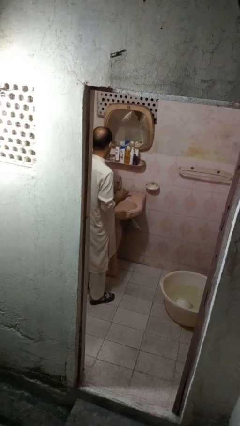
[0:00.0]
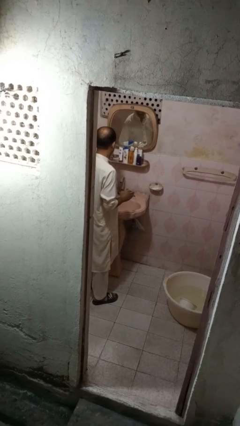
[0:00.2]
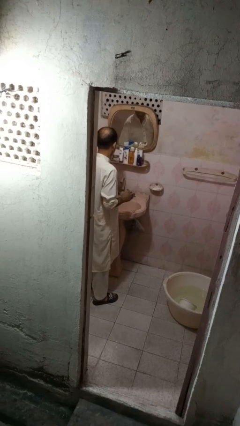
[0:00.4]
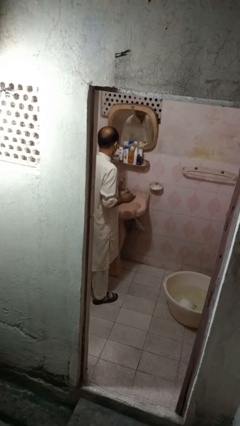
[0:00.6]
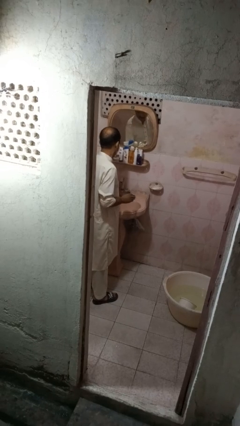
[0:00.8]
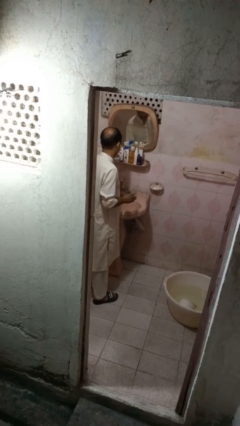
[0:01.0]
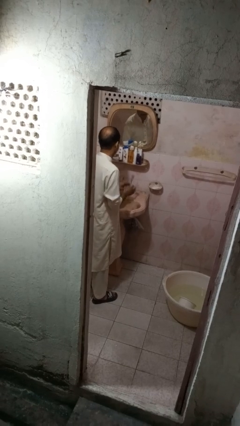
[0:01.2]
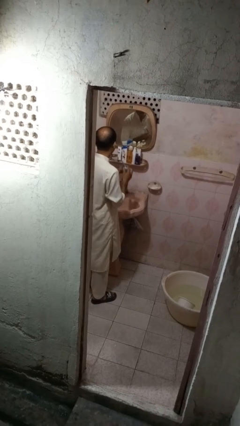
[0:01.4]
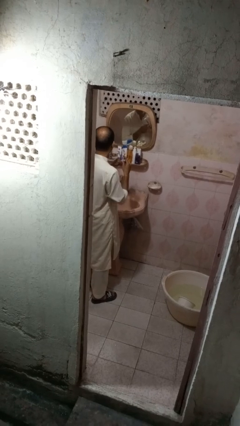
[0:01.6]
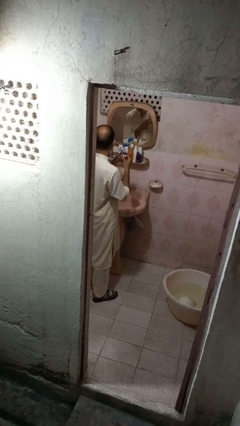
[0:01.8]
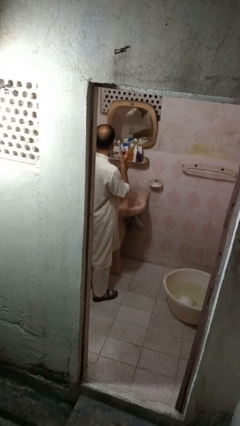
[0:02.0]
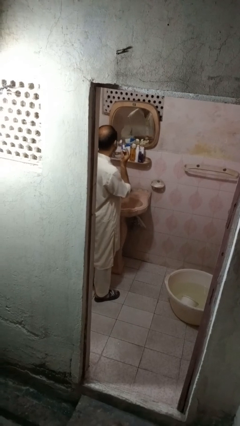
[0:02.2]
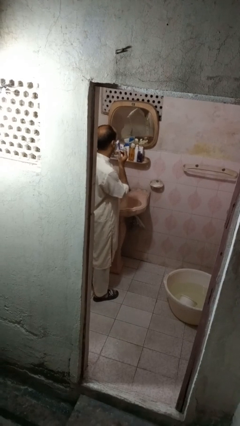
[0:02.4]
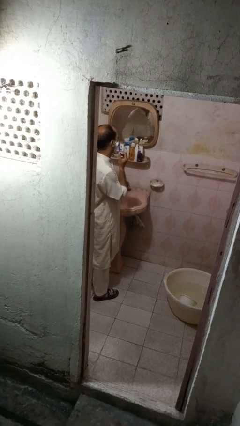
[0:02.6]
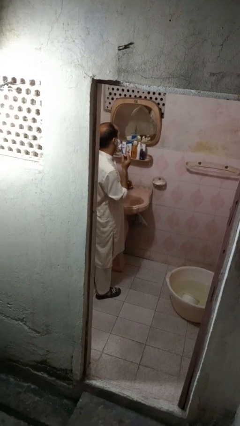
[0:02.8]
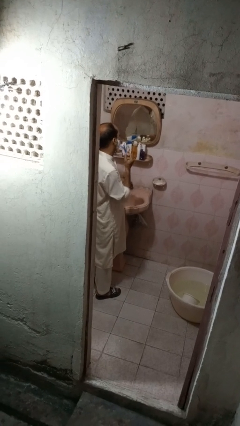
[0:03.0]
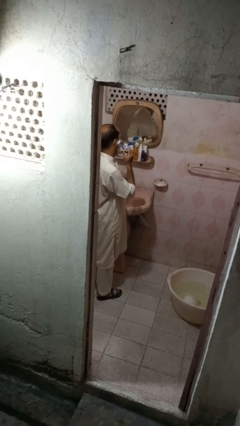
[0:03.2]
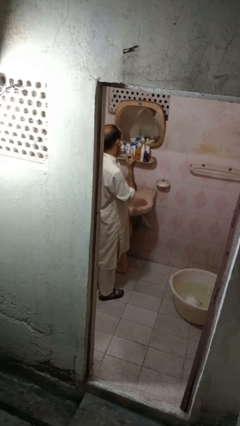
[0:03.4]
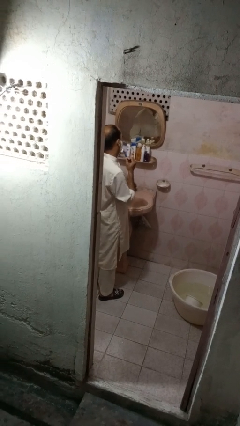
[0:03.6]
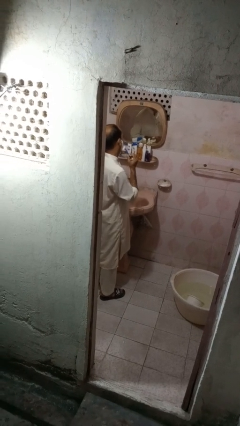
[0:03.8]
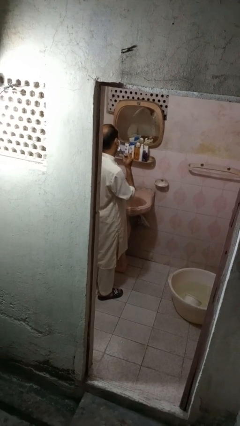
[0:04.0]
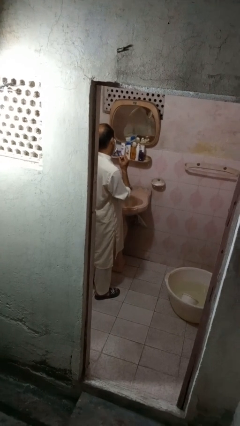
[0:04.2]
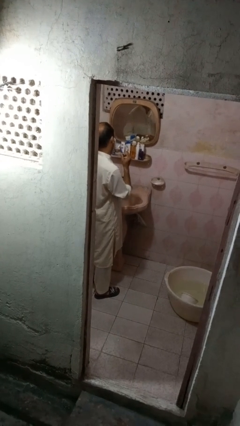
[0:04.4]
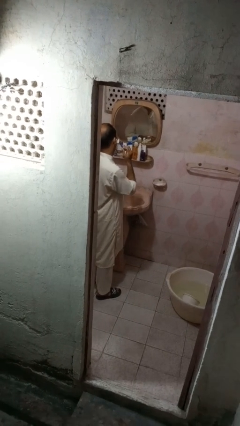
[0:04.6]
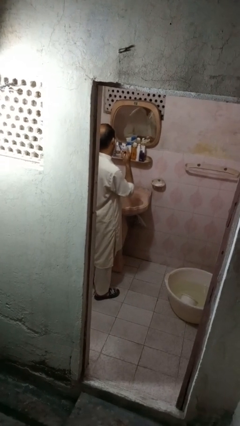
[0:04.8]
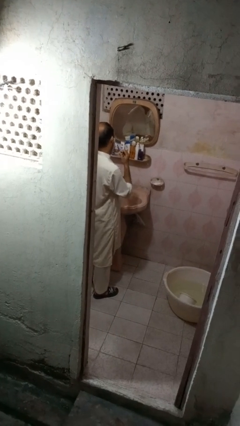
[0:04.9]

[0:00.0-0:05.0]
person shaves face

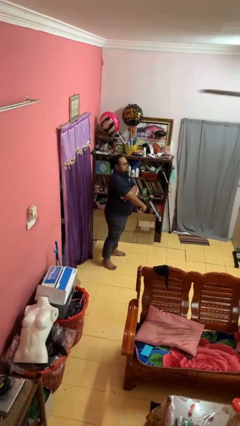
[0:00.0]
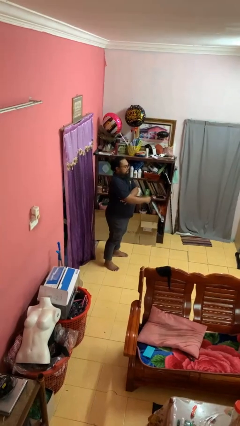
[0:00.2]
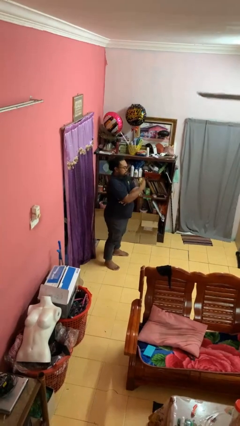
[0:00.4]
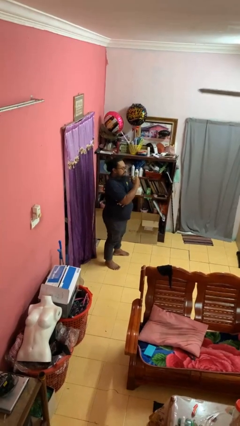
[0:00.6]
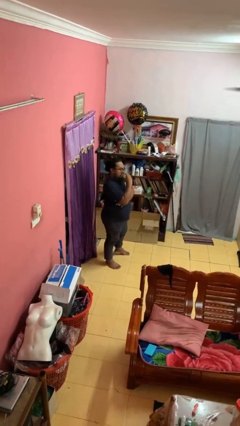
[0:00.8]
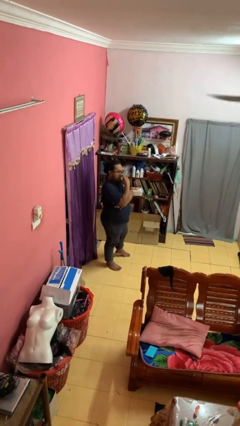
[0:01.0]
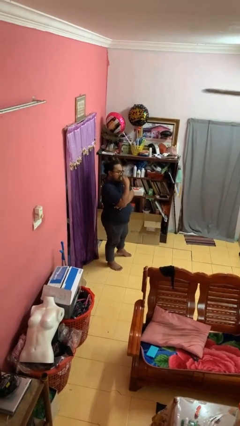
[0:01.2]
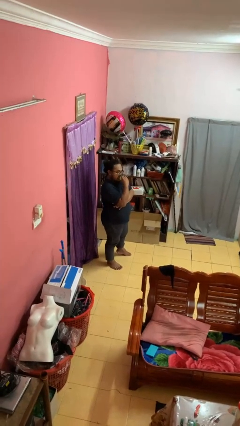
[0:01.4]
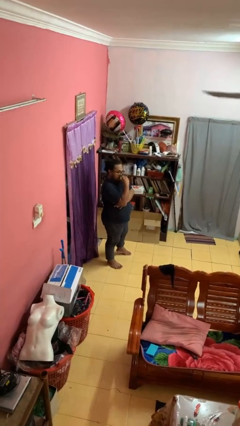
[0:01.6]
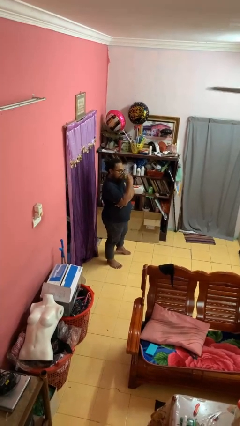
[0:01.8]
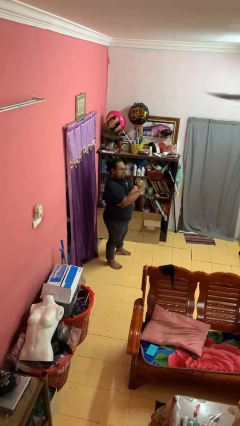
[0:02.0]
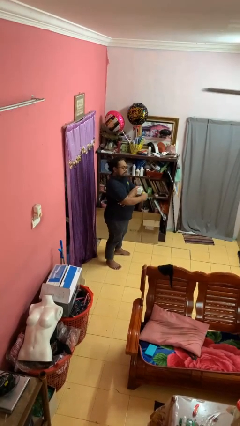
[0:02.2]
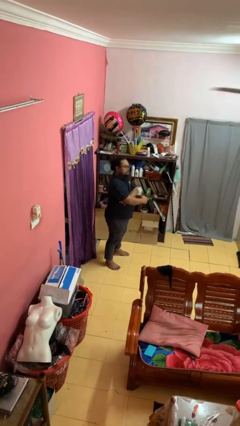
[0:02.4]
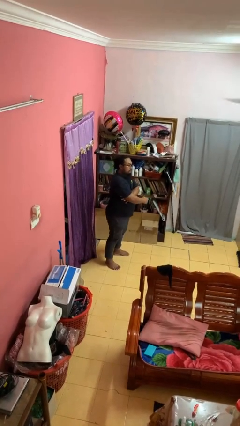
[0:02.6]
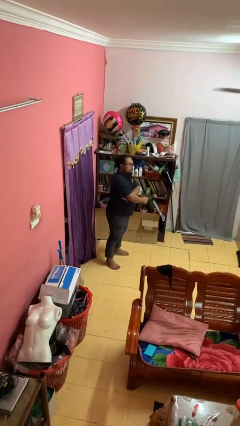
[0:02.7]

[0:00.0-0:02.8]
person eats apple

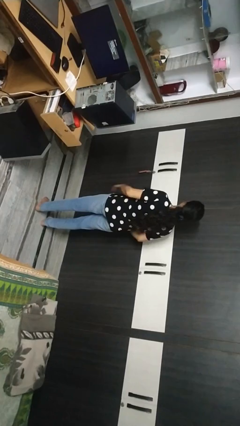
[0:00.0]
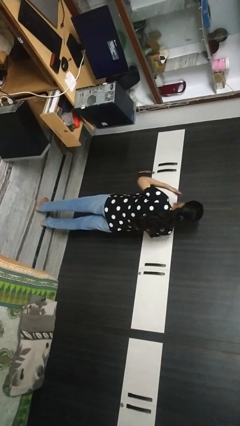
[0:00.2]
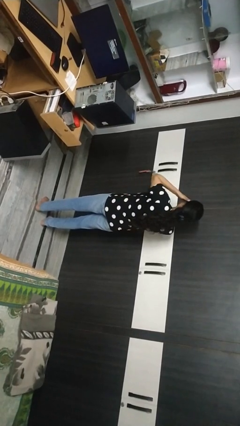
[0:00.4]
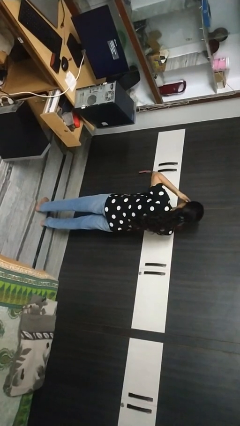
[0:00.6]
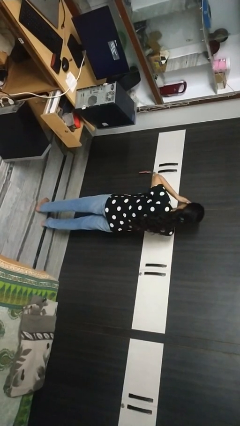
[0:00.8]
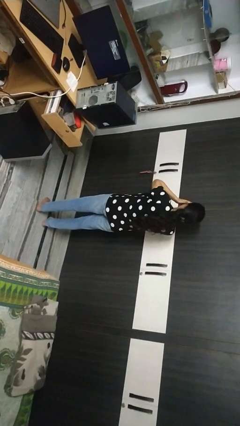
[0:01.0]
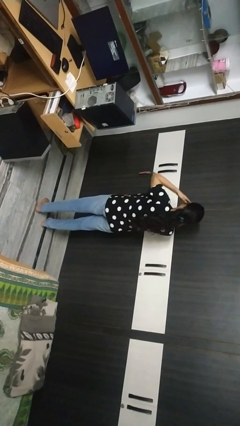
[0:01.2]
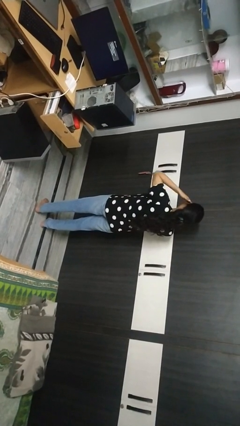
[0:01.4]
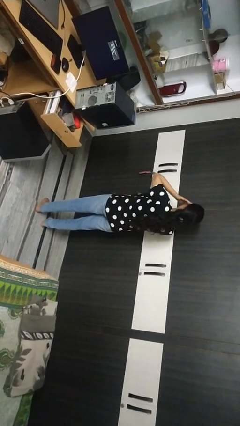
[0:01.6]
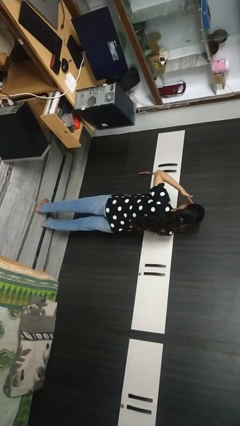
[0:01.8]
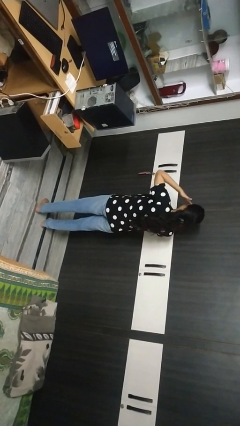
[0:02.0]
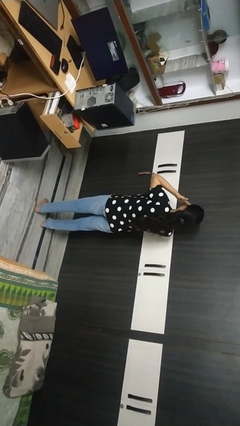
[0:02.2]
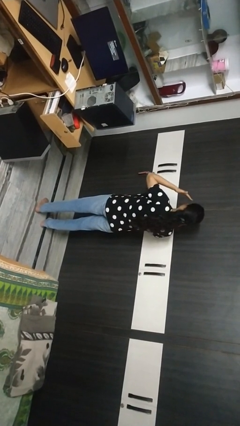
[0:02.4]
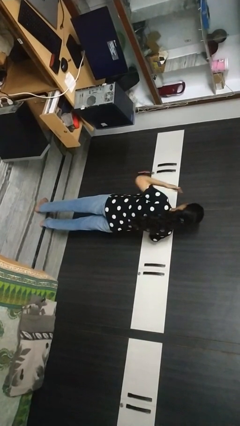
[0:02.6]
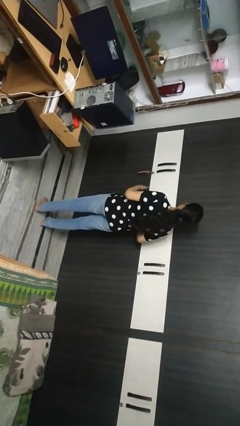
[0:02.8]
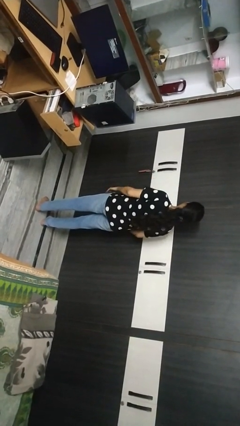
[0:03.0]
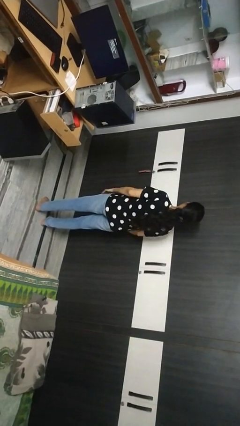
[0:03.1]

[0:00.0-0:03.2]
person rubs eyes

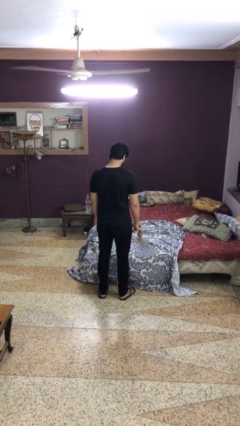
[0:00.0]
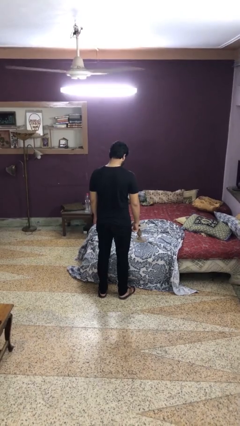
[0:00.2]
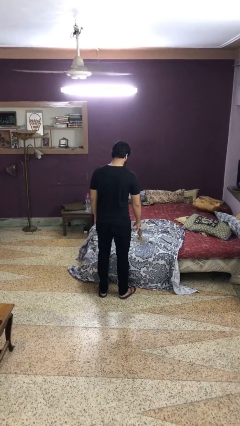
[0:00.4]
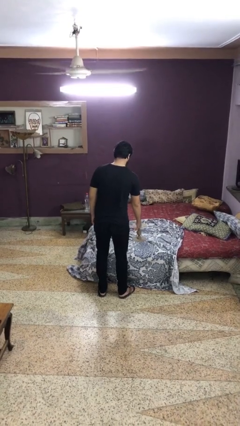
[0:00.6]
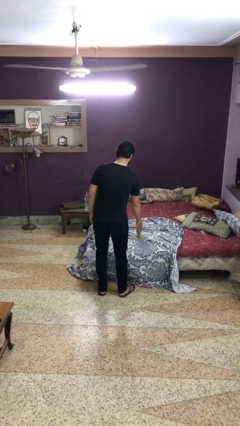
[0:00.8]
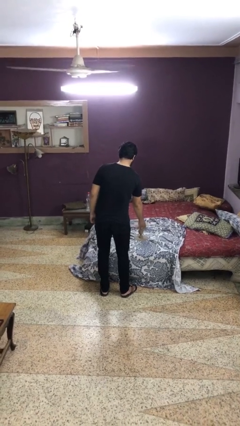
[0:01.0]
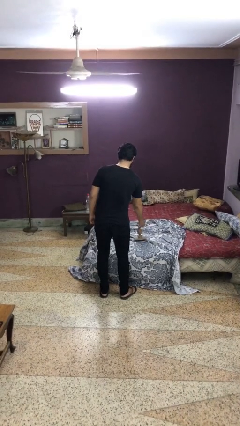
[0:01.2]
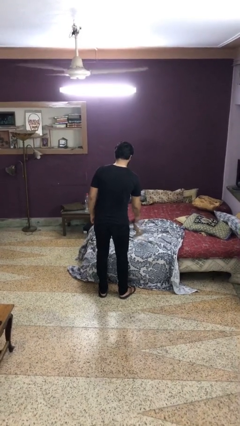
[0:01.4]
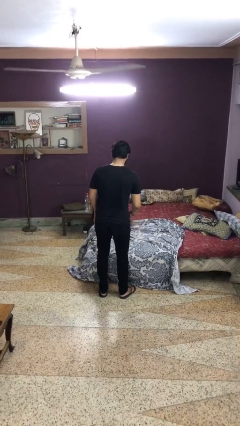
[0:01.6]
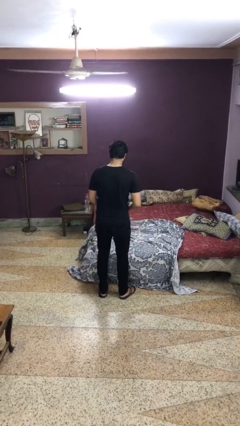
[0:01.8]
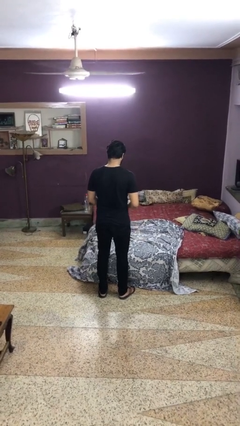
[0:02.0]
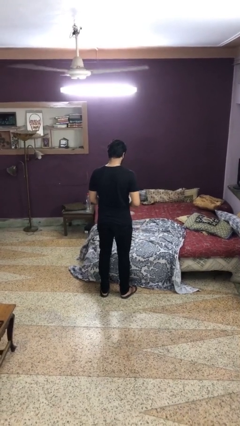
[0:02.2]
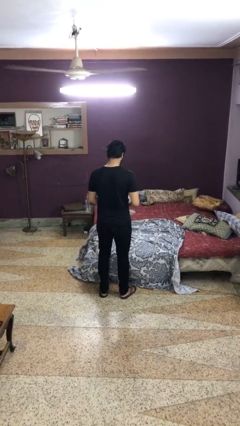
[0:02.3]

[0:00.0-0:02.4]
person picks up object from bed

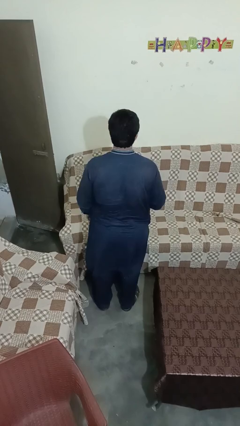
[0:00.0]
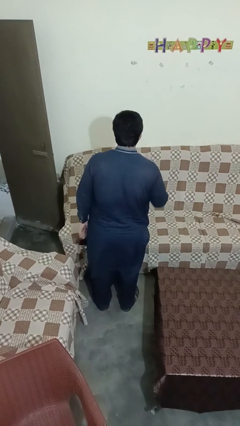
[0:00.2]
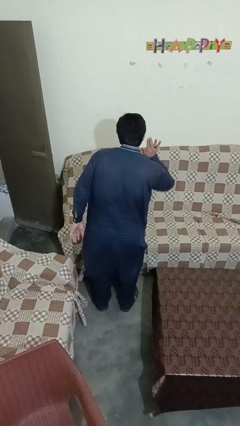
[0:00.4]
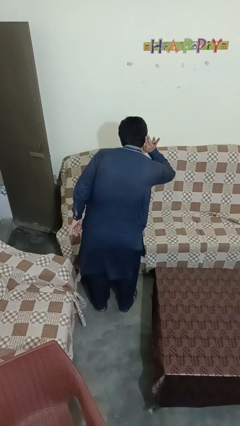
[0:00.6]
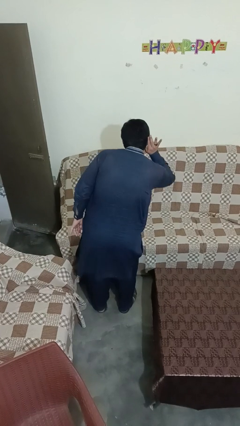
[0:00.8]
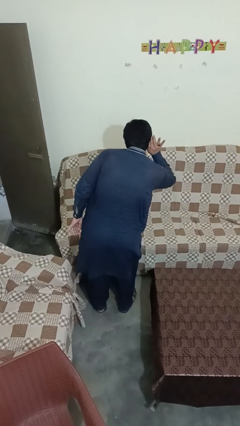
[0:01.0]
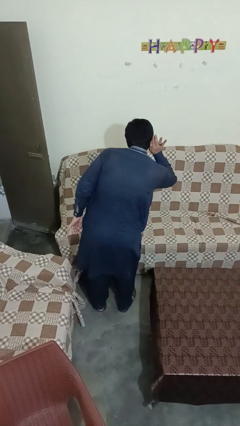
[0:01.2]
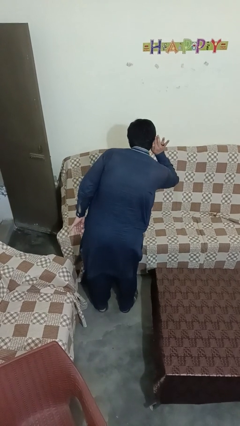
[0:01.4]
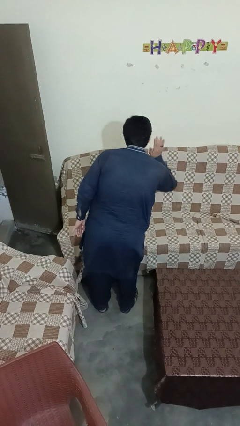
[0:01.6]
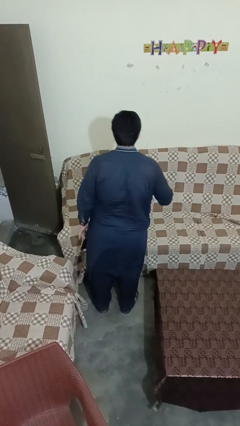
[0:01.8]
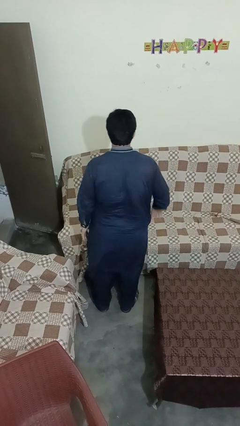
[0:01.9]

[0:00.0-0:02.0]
person gestures listen closely

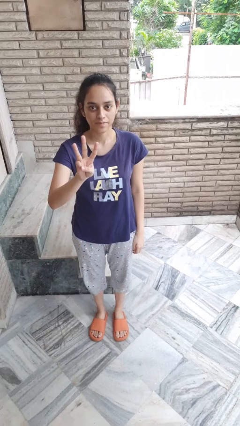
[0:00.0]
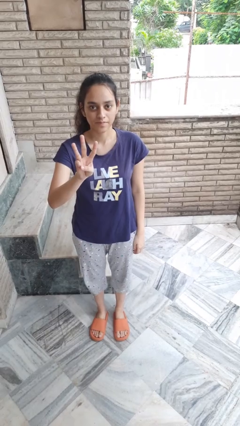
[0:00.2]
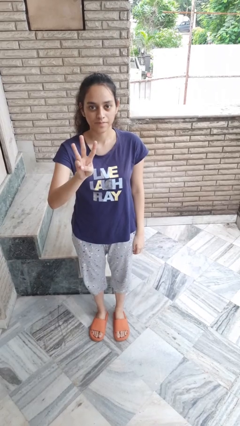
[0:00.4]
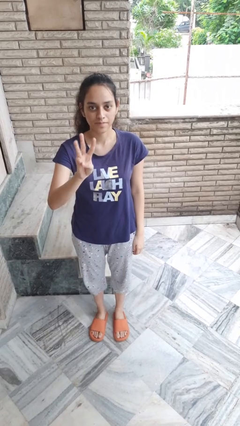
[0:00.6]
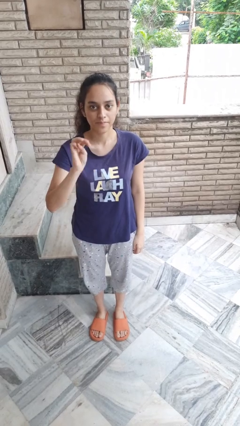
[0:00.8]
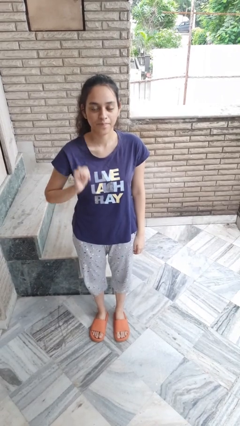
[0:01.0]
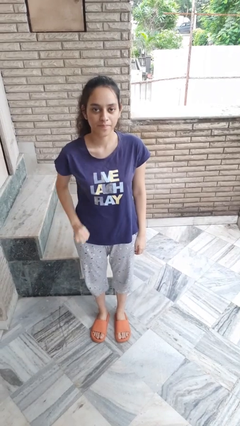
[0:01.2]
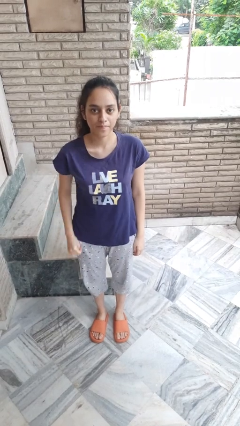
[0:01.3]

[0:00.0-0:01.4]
person gestures number three

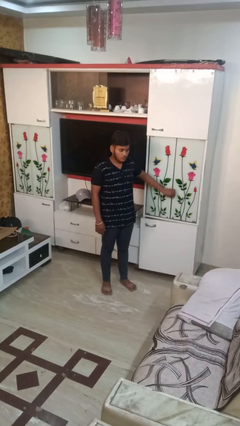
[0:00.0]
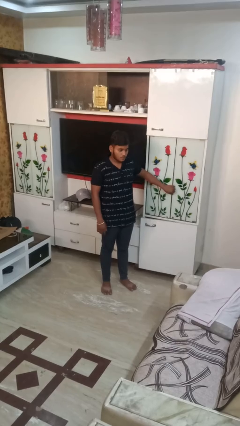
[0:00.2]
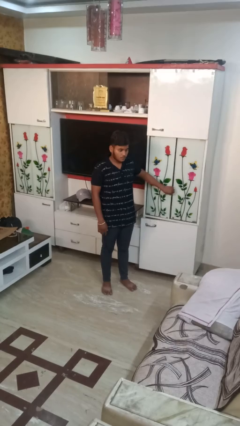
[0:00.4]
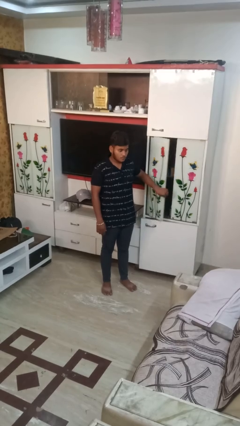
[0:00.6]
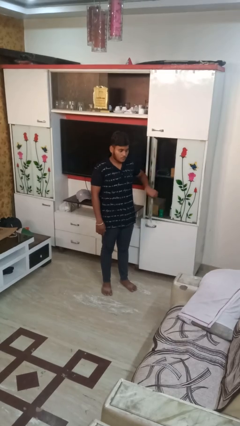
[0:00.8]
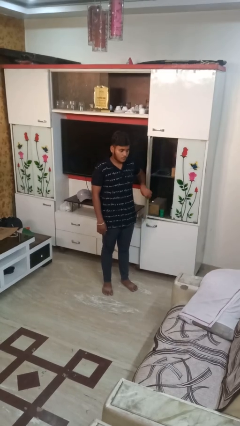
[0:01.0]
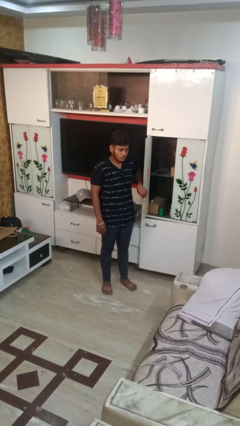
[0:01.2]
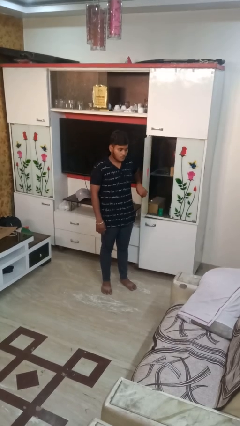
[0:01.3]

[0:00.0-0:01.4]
person opens closet door
